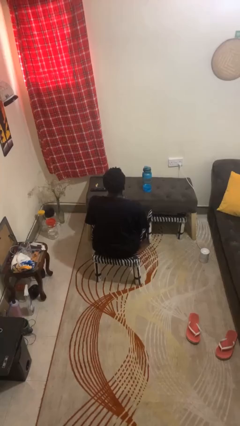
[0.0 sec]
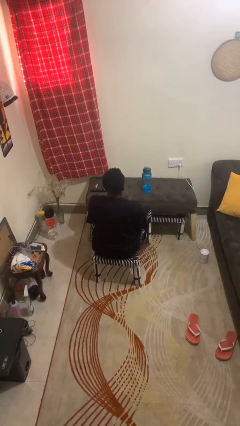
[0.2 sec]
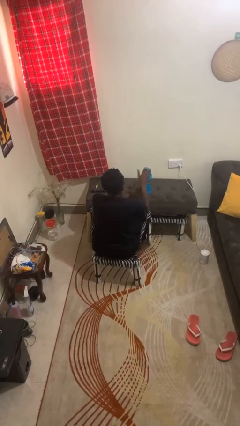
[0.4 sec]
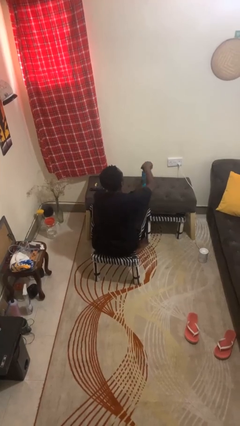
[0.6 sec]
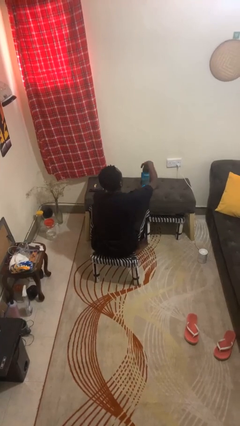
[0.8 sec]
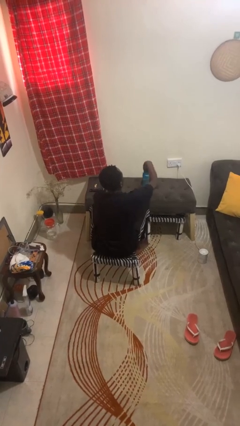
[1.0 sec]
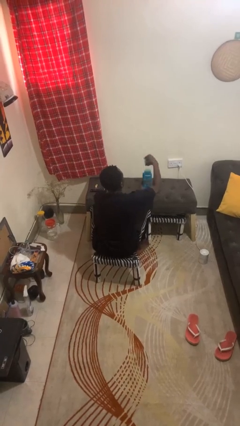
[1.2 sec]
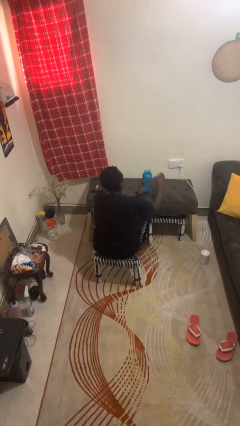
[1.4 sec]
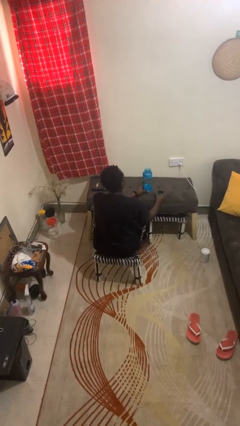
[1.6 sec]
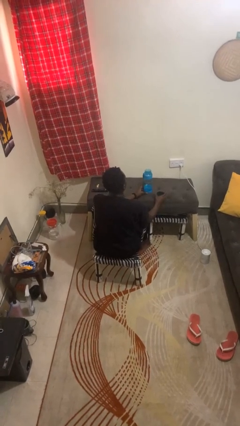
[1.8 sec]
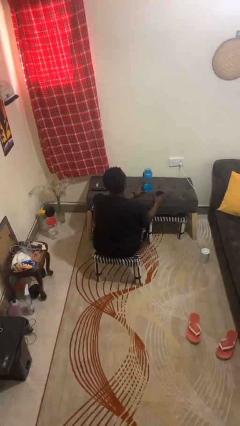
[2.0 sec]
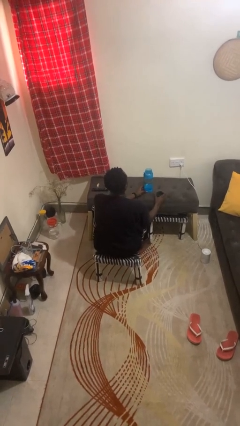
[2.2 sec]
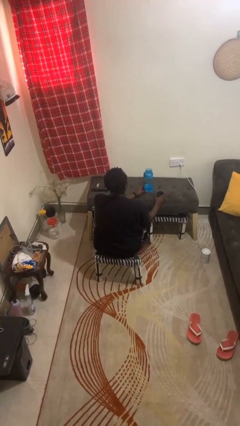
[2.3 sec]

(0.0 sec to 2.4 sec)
person opens jar

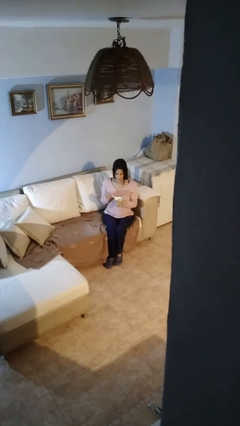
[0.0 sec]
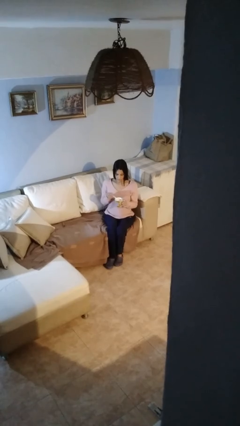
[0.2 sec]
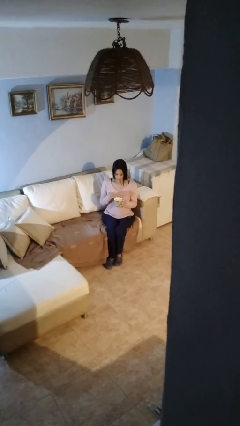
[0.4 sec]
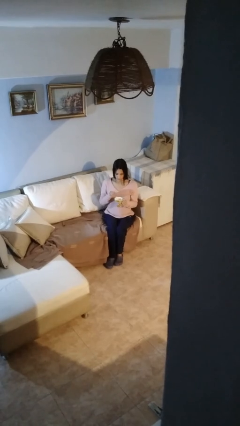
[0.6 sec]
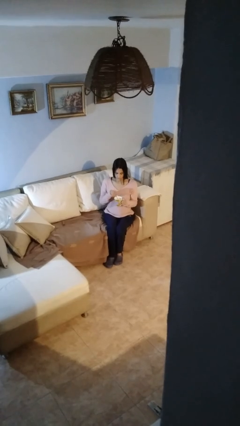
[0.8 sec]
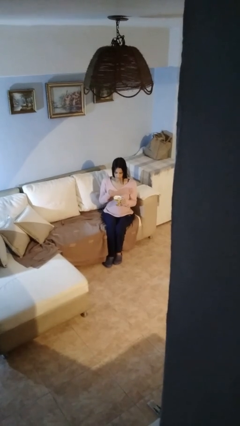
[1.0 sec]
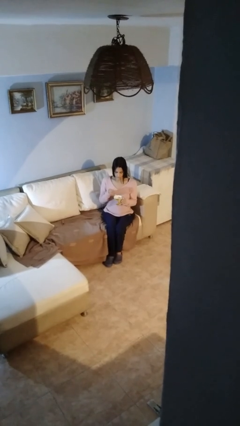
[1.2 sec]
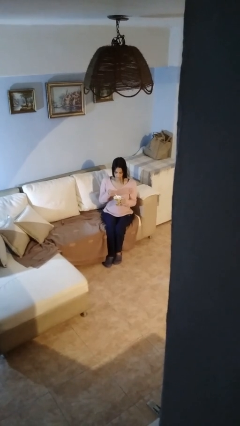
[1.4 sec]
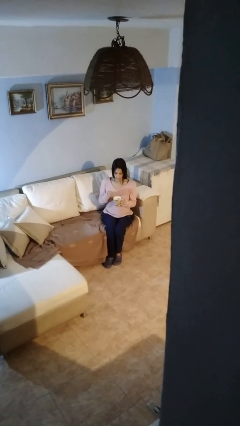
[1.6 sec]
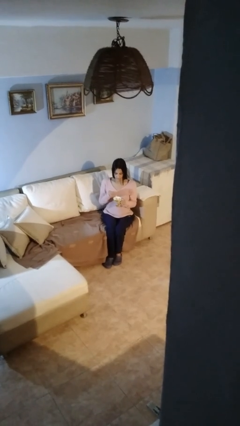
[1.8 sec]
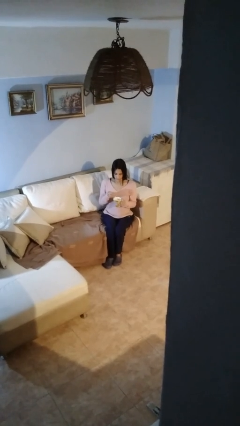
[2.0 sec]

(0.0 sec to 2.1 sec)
person stirs mug

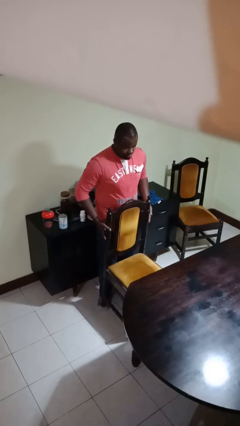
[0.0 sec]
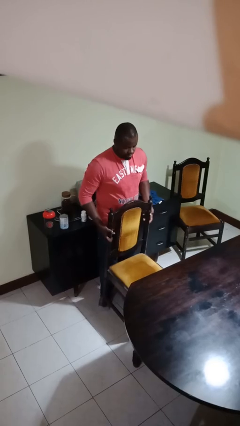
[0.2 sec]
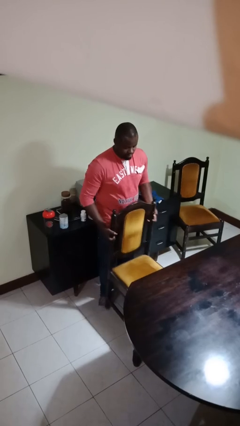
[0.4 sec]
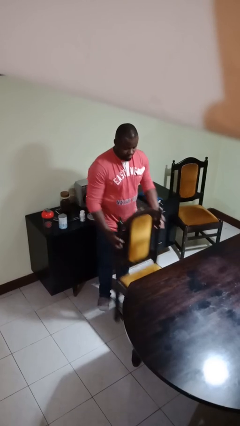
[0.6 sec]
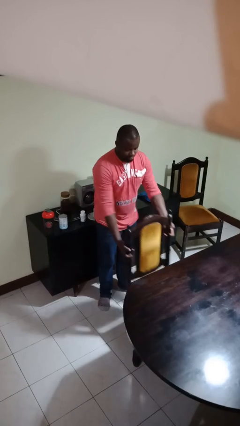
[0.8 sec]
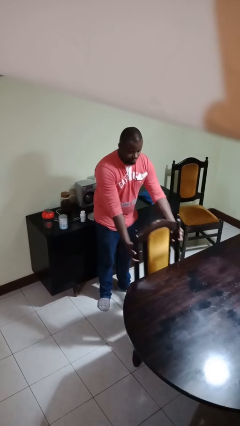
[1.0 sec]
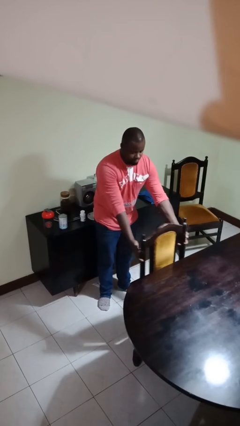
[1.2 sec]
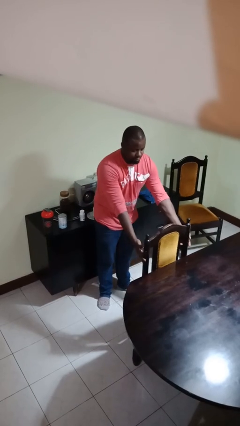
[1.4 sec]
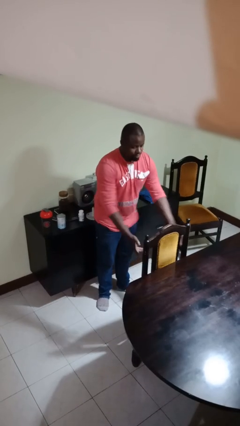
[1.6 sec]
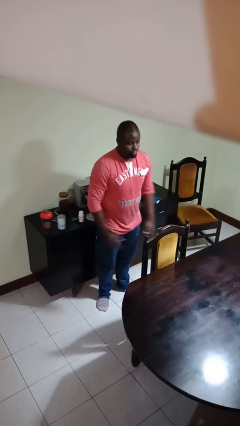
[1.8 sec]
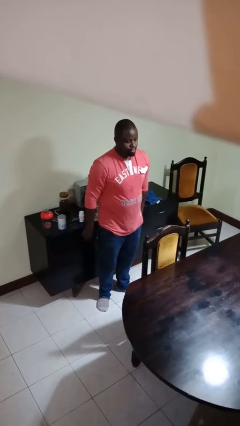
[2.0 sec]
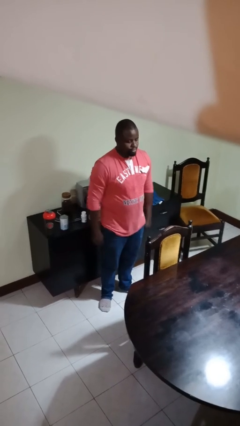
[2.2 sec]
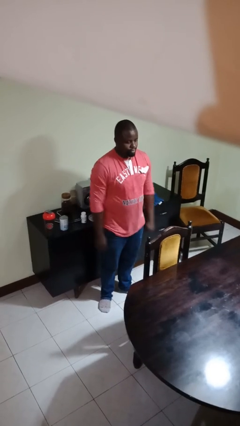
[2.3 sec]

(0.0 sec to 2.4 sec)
person pushes in chair

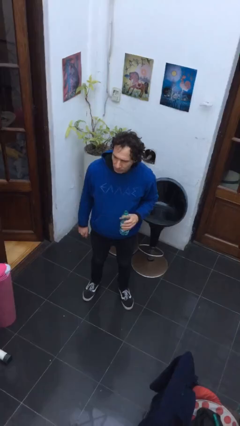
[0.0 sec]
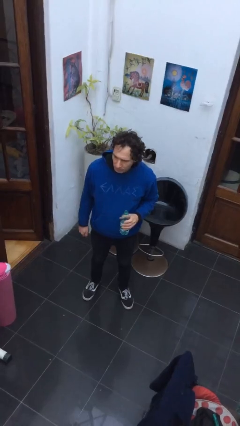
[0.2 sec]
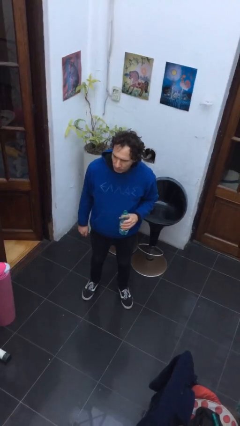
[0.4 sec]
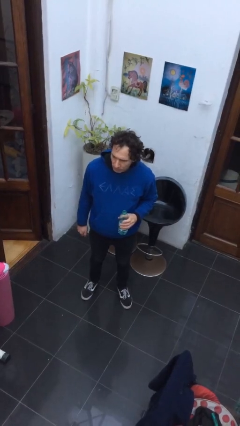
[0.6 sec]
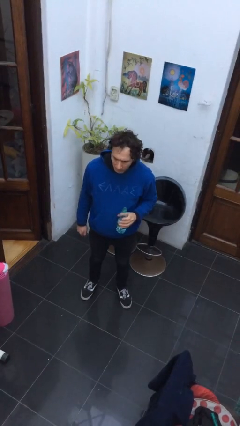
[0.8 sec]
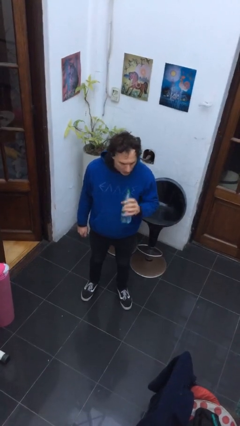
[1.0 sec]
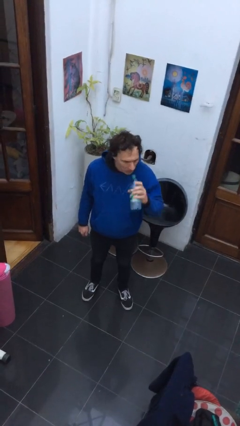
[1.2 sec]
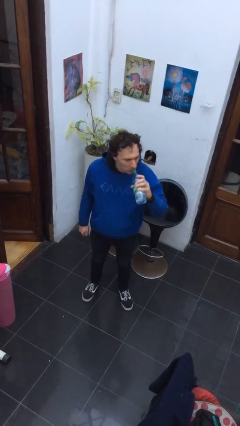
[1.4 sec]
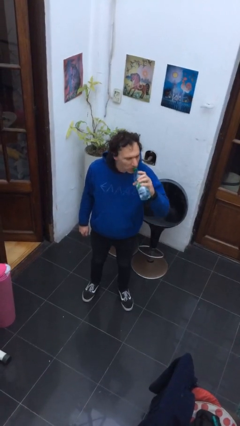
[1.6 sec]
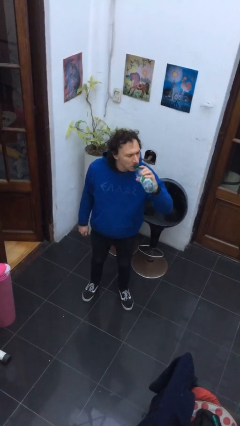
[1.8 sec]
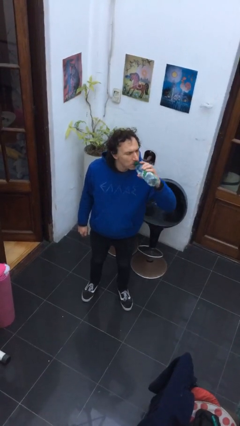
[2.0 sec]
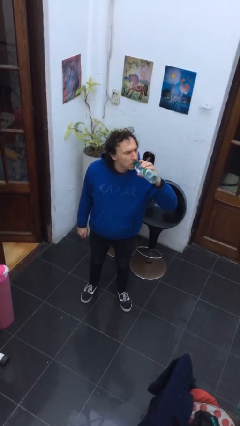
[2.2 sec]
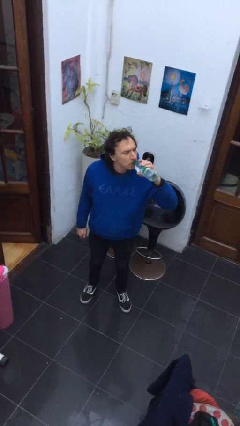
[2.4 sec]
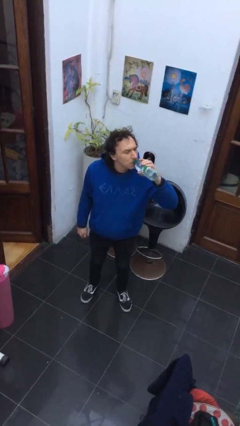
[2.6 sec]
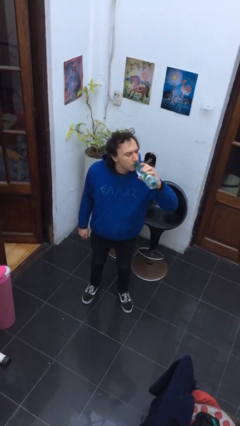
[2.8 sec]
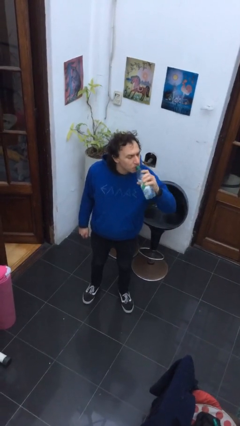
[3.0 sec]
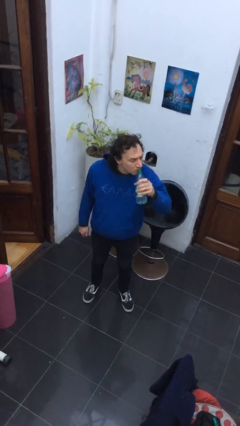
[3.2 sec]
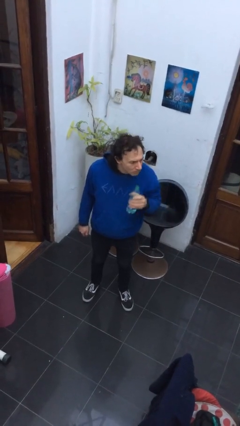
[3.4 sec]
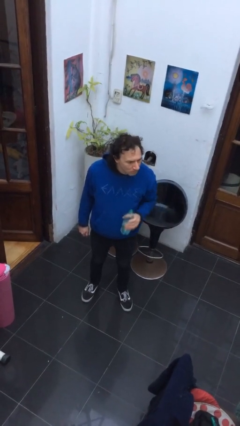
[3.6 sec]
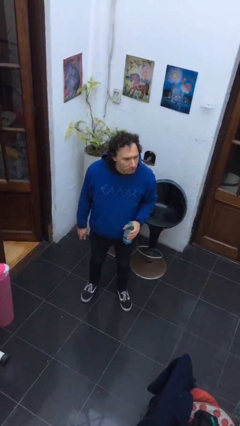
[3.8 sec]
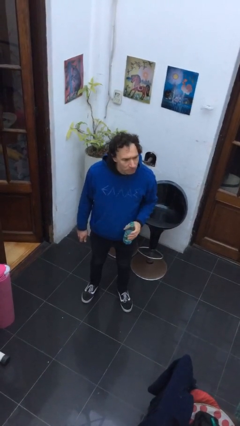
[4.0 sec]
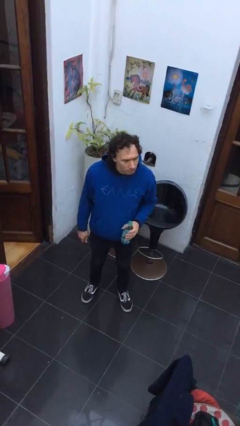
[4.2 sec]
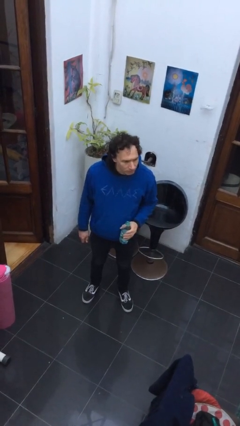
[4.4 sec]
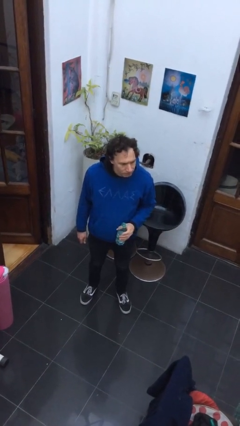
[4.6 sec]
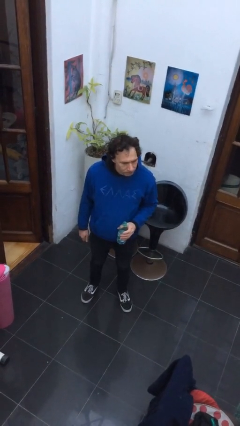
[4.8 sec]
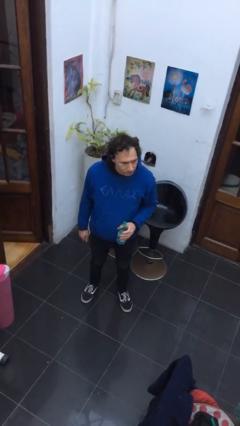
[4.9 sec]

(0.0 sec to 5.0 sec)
person drinks from bottle

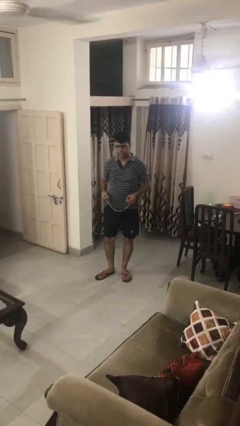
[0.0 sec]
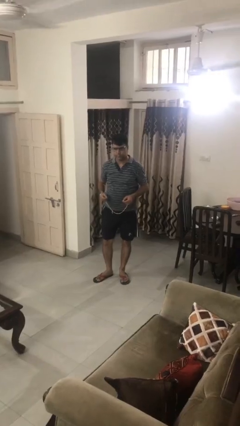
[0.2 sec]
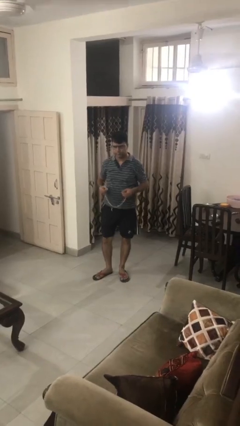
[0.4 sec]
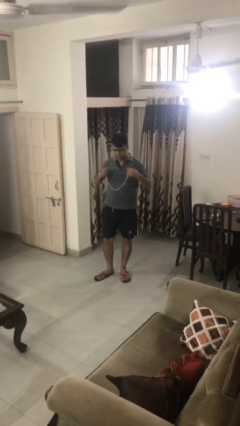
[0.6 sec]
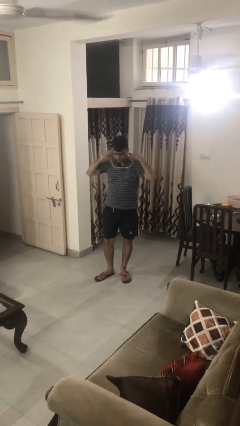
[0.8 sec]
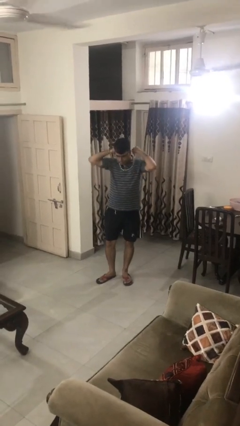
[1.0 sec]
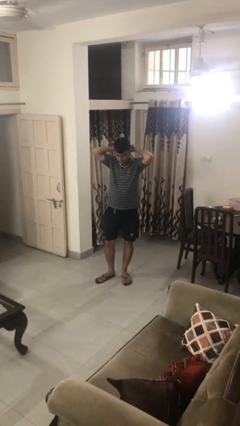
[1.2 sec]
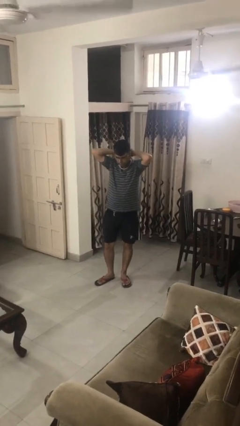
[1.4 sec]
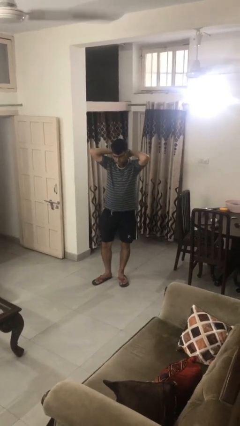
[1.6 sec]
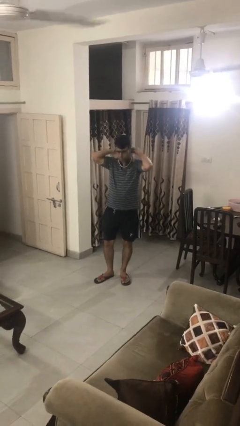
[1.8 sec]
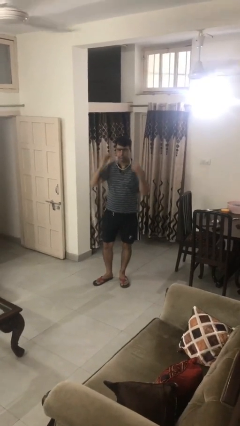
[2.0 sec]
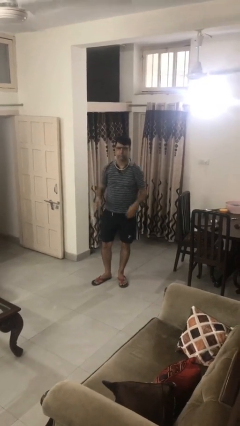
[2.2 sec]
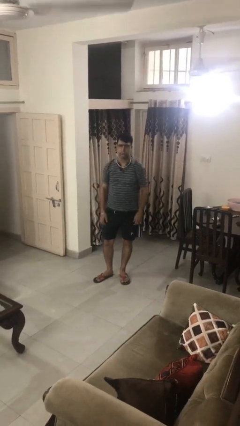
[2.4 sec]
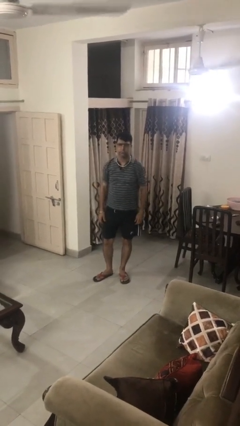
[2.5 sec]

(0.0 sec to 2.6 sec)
person puts on necklace

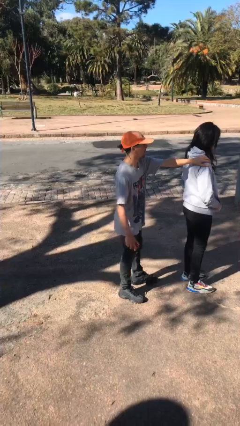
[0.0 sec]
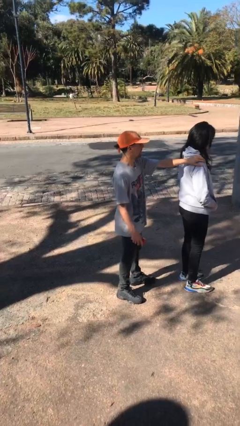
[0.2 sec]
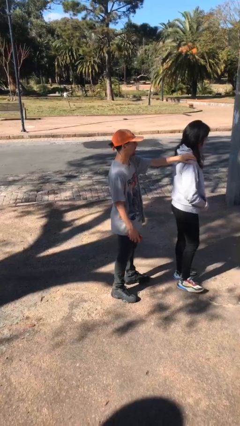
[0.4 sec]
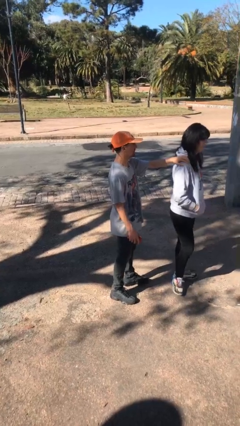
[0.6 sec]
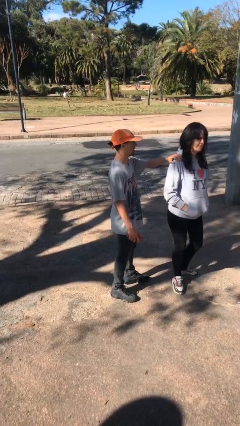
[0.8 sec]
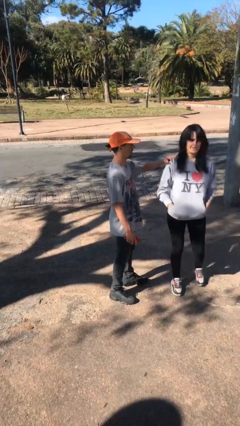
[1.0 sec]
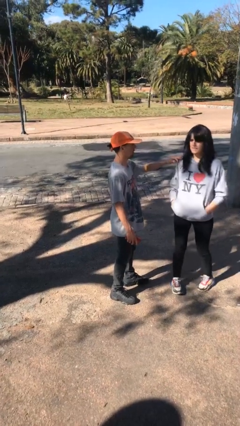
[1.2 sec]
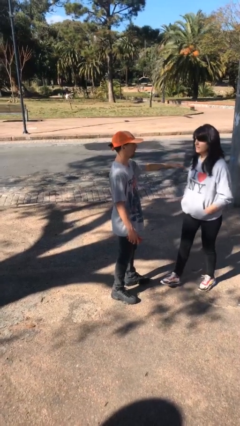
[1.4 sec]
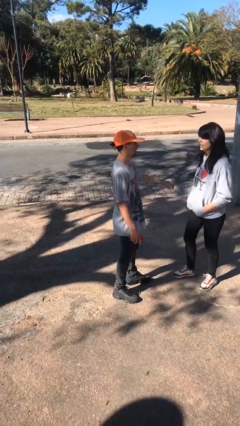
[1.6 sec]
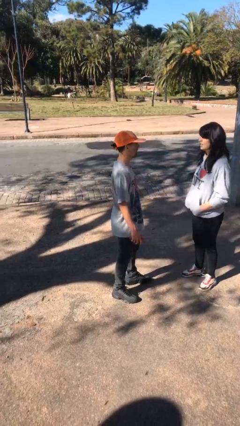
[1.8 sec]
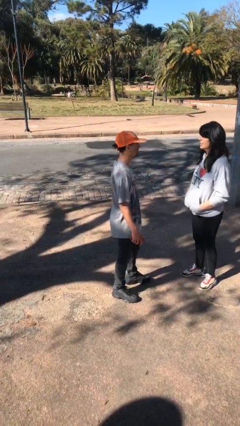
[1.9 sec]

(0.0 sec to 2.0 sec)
person spins person around
